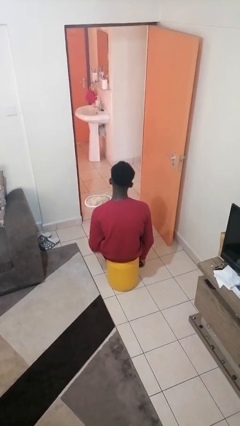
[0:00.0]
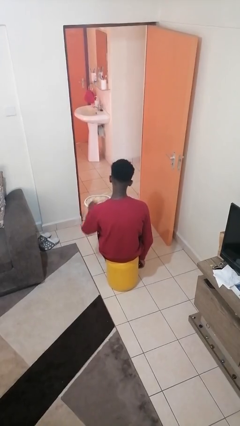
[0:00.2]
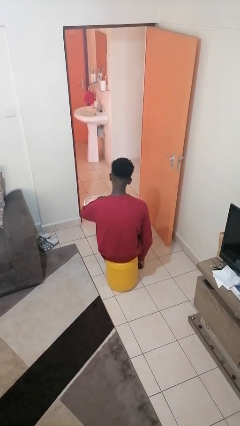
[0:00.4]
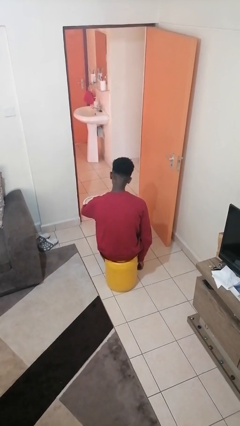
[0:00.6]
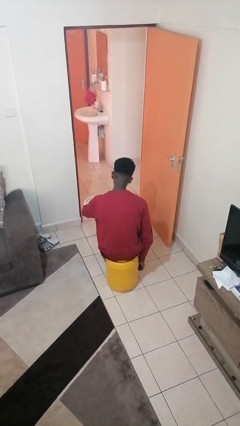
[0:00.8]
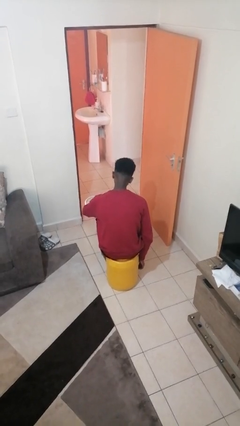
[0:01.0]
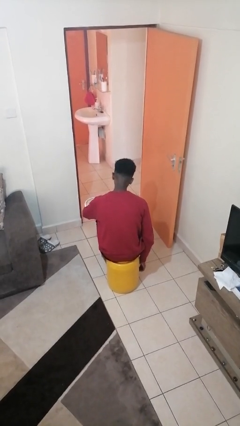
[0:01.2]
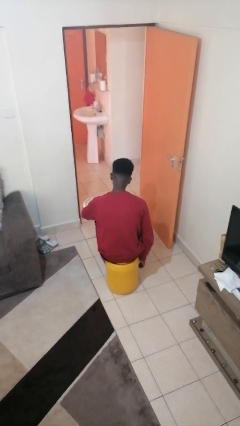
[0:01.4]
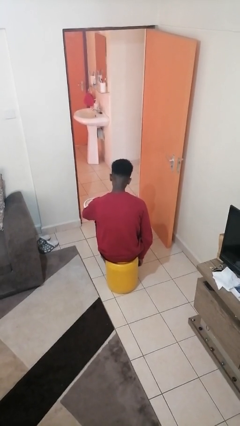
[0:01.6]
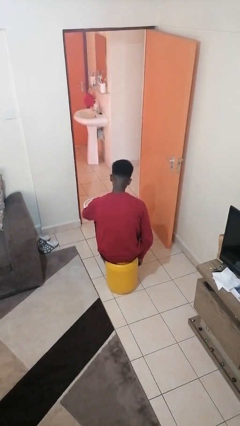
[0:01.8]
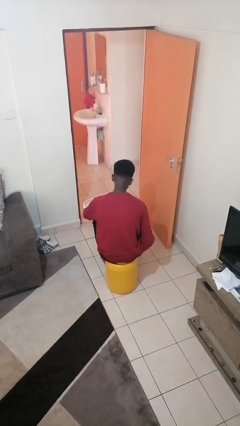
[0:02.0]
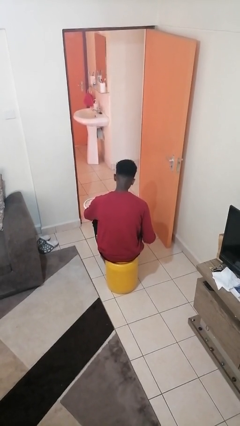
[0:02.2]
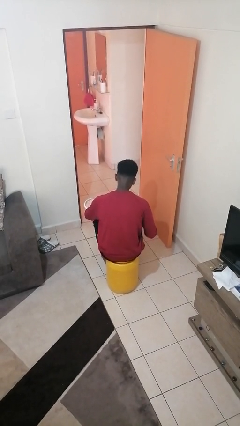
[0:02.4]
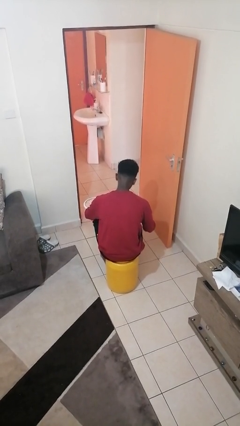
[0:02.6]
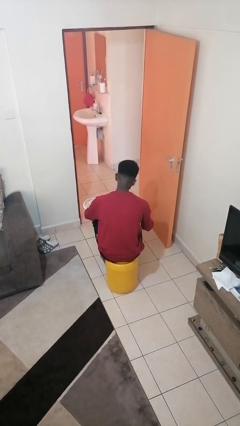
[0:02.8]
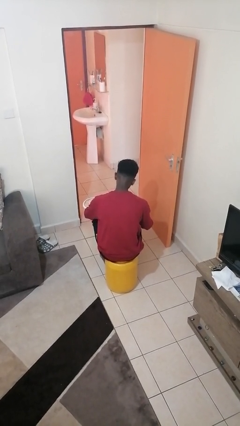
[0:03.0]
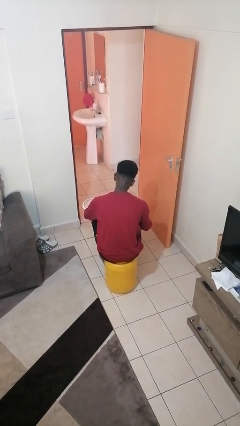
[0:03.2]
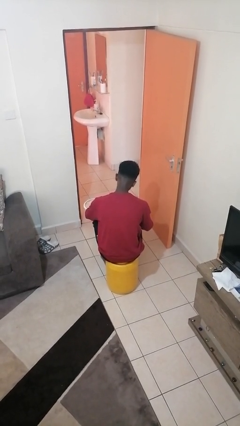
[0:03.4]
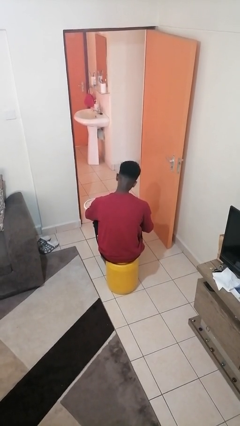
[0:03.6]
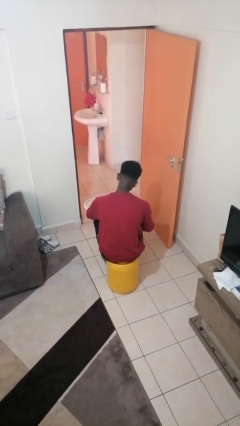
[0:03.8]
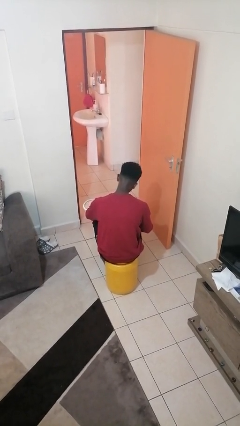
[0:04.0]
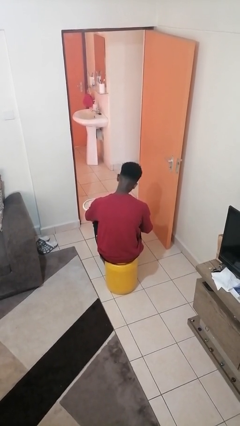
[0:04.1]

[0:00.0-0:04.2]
person taps object with finger

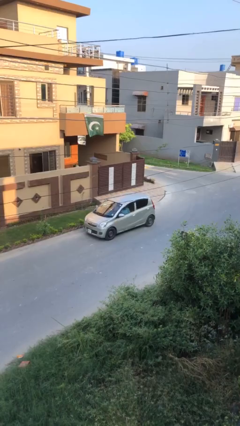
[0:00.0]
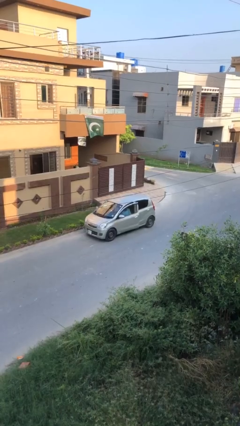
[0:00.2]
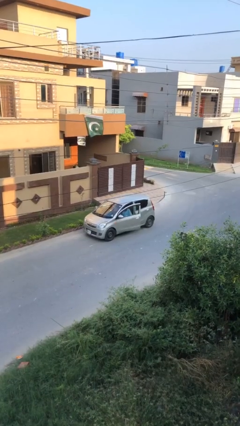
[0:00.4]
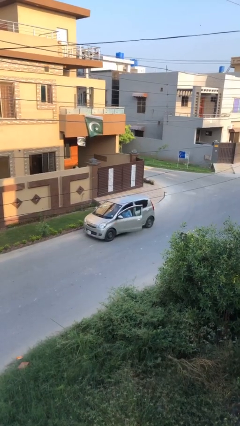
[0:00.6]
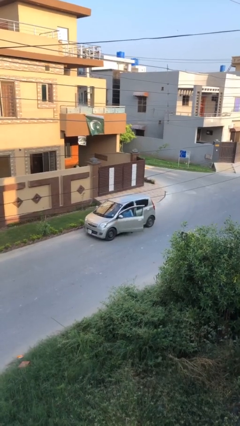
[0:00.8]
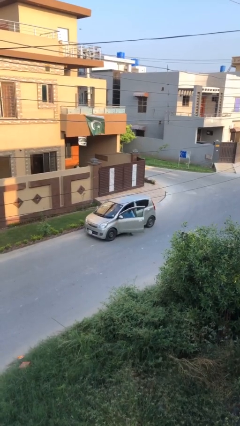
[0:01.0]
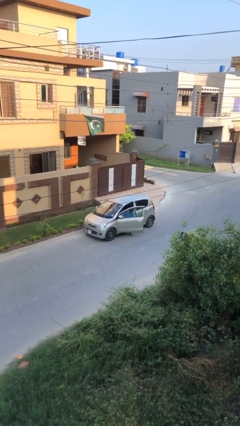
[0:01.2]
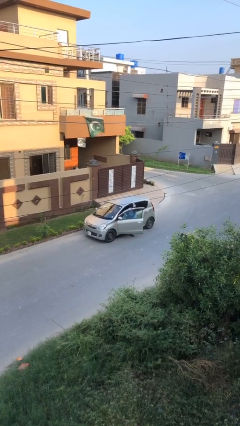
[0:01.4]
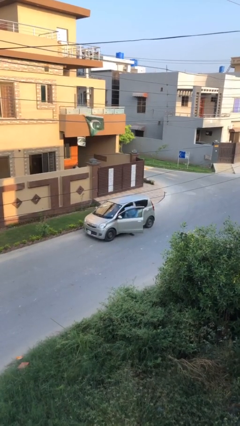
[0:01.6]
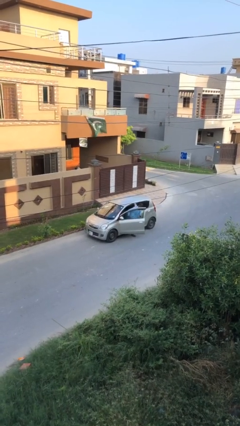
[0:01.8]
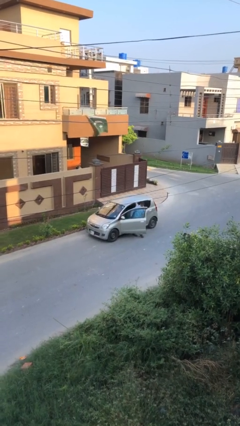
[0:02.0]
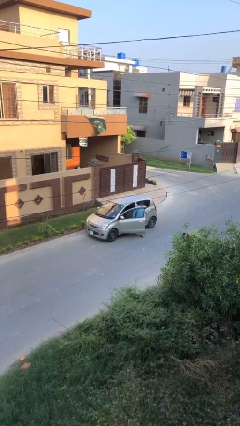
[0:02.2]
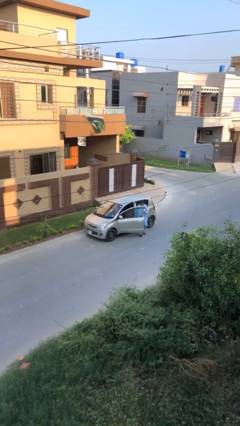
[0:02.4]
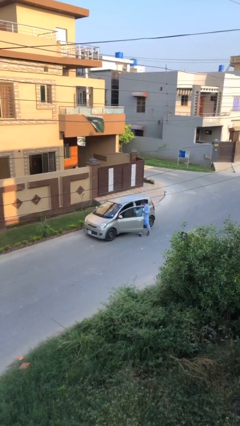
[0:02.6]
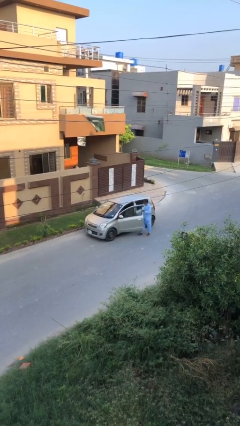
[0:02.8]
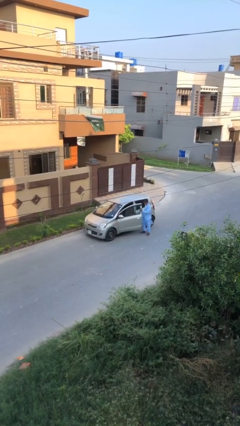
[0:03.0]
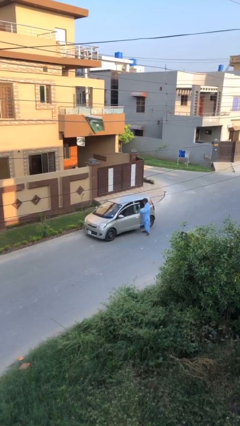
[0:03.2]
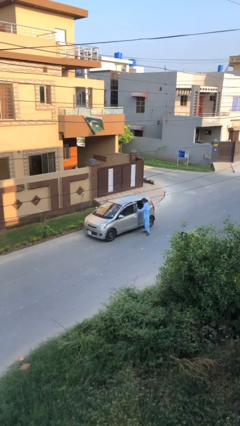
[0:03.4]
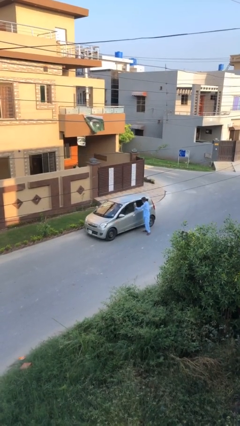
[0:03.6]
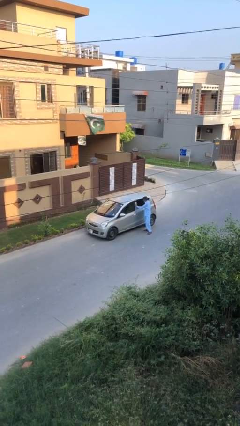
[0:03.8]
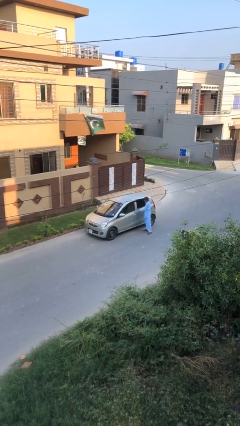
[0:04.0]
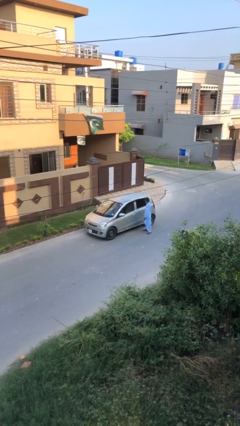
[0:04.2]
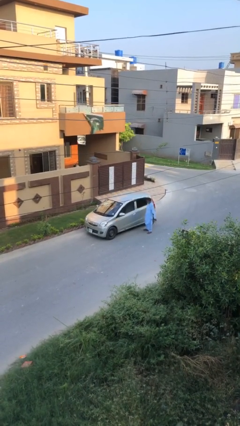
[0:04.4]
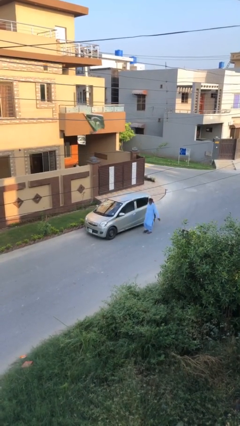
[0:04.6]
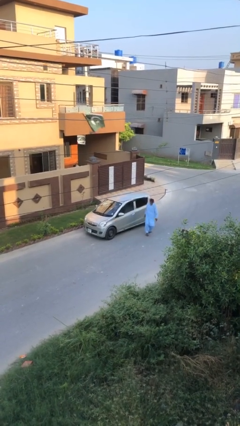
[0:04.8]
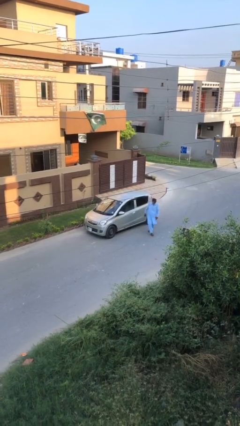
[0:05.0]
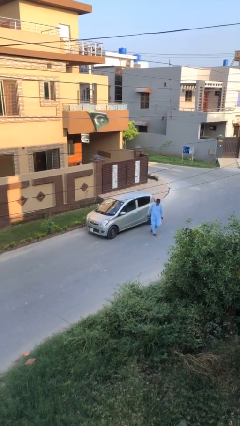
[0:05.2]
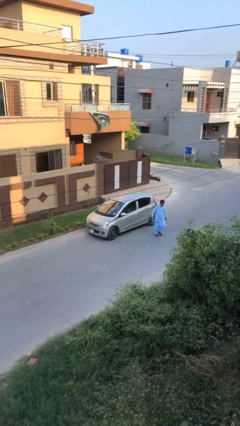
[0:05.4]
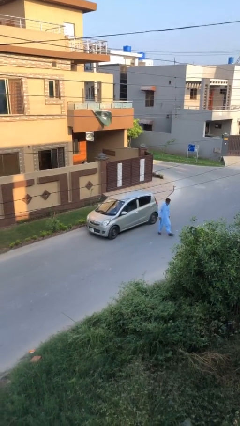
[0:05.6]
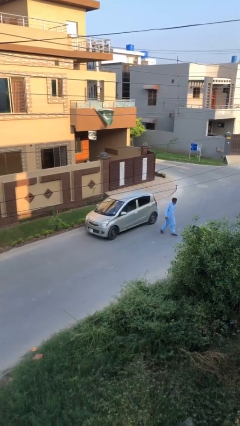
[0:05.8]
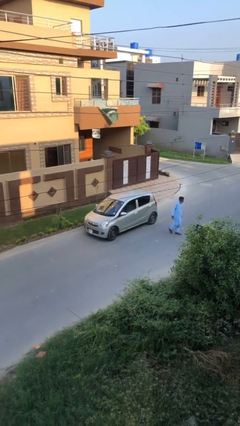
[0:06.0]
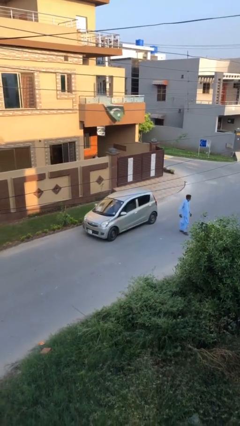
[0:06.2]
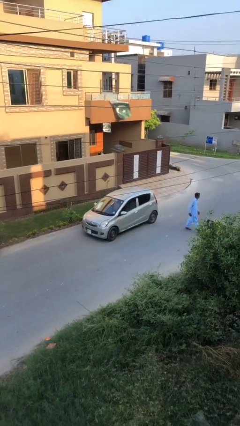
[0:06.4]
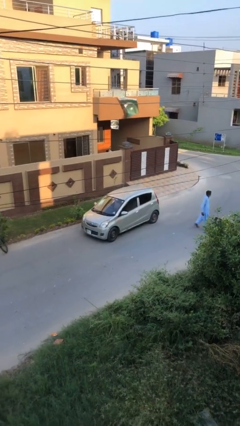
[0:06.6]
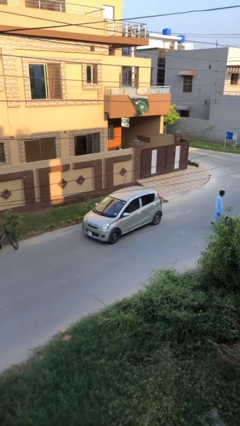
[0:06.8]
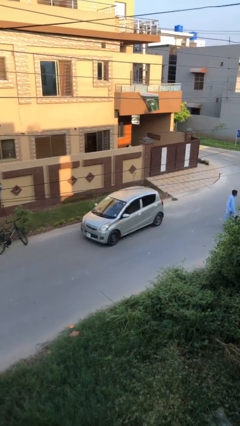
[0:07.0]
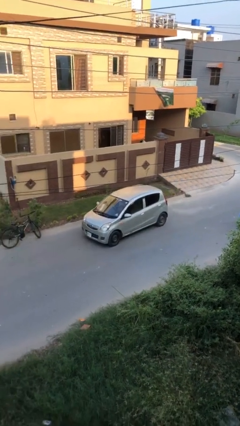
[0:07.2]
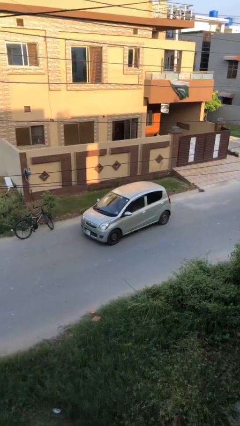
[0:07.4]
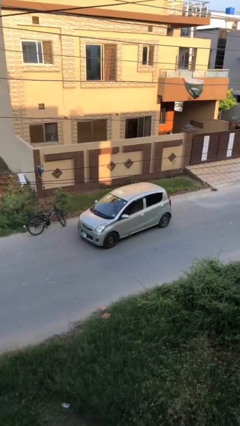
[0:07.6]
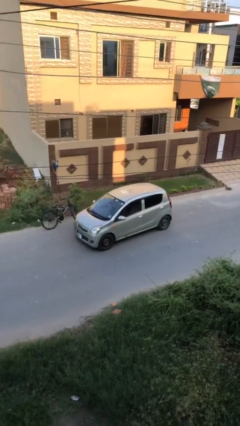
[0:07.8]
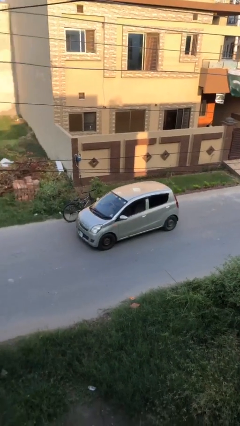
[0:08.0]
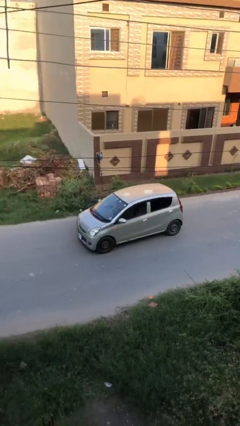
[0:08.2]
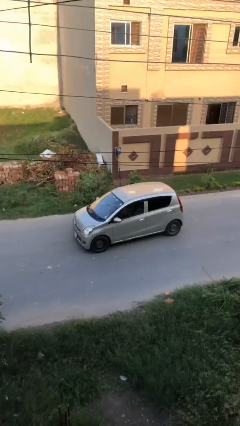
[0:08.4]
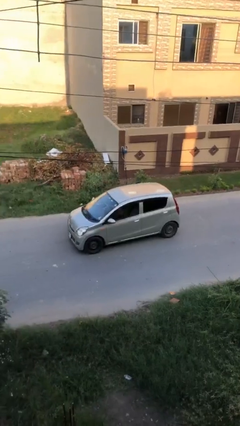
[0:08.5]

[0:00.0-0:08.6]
car drops off person

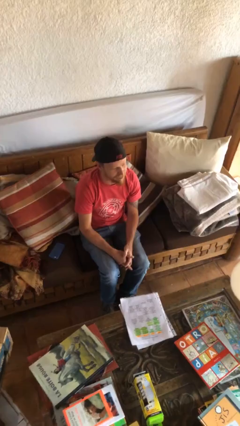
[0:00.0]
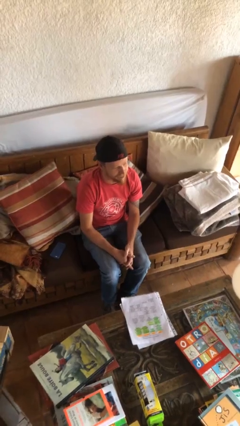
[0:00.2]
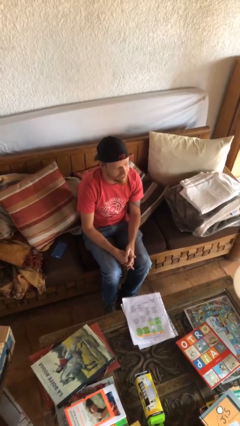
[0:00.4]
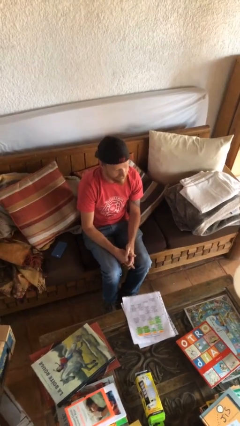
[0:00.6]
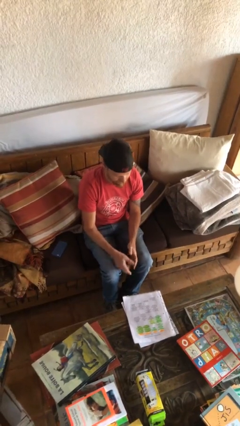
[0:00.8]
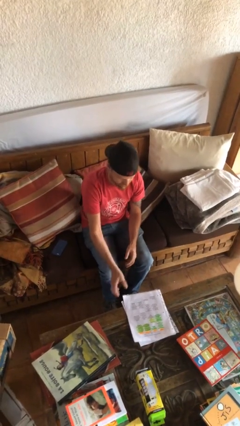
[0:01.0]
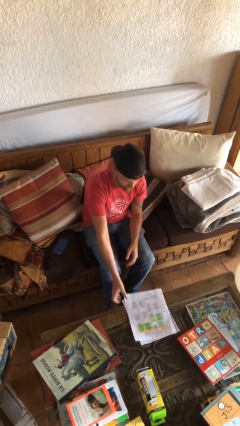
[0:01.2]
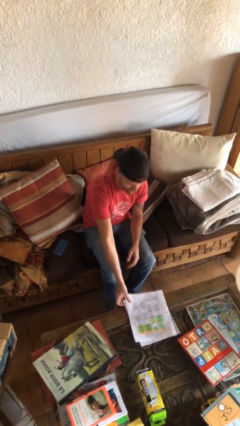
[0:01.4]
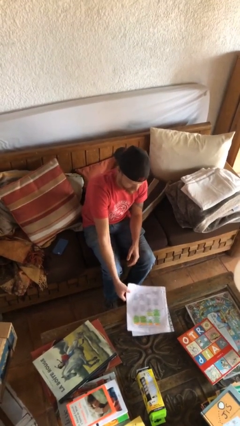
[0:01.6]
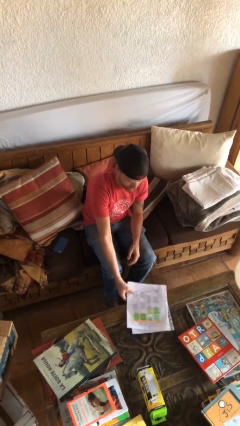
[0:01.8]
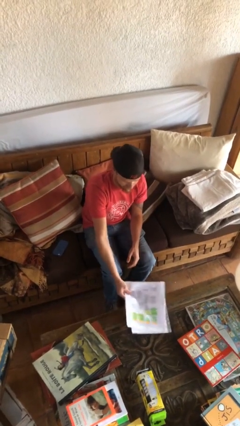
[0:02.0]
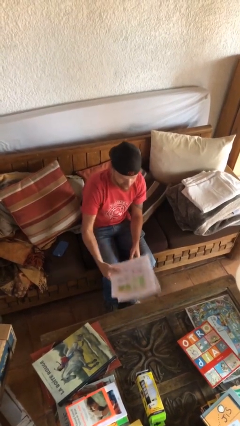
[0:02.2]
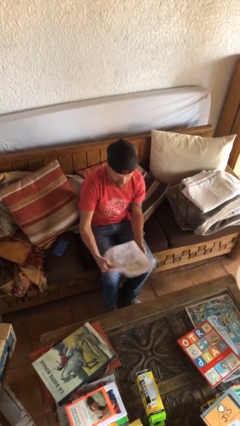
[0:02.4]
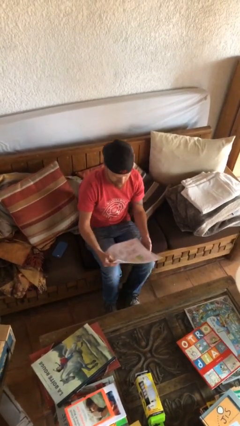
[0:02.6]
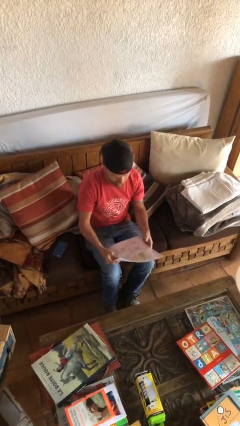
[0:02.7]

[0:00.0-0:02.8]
person picks up object from table

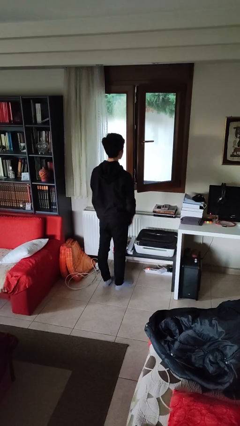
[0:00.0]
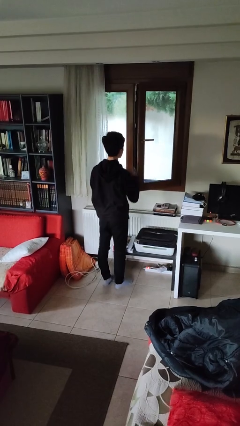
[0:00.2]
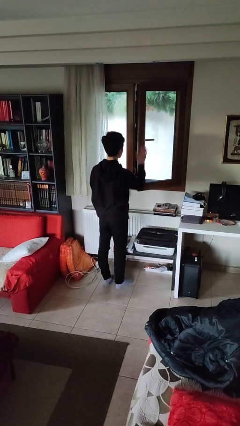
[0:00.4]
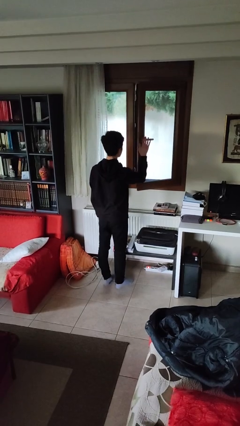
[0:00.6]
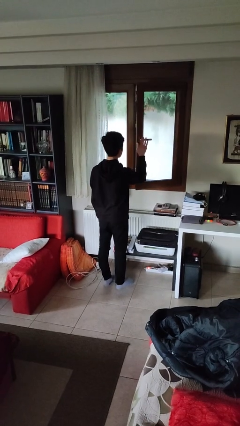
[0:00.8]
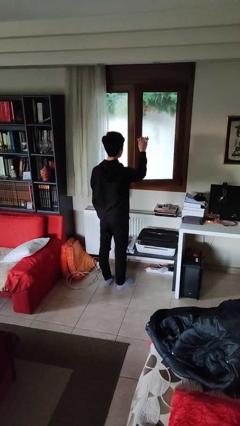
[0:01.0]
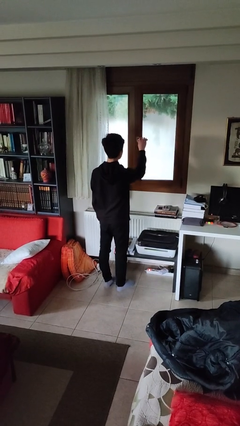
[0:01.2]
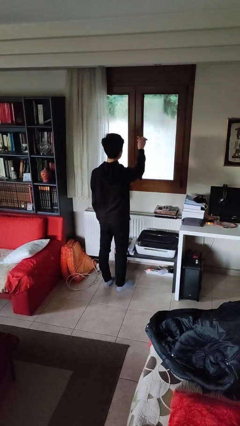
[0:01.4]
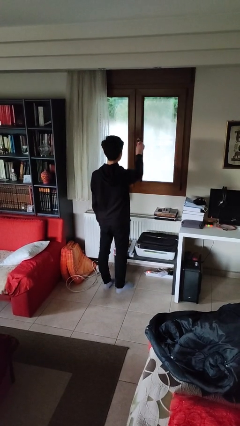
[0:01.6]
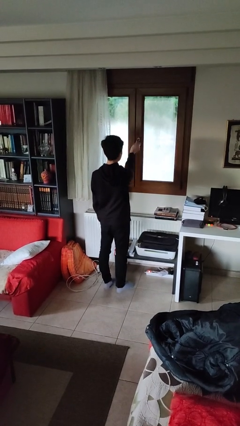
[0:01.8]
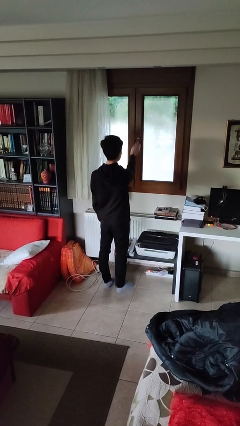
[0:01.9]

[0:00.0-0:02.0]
person closes home window

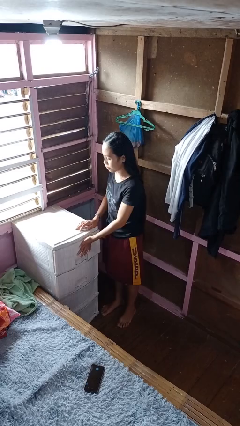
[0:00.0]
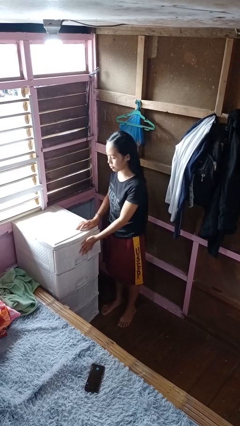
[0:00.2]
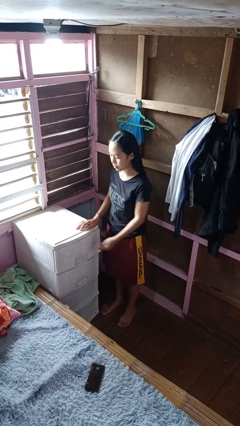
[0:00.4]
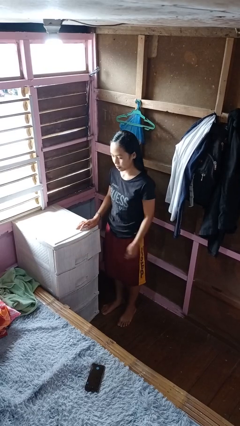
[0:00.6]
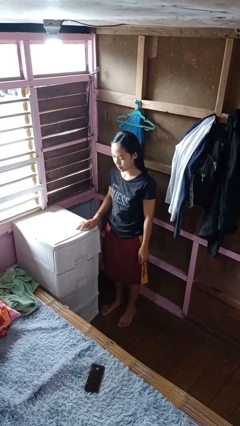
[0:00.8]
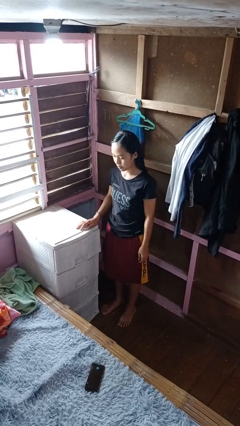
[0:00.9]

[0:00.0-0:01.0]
person closes dresser drawer
